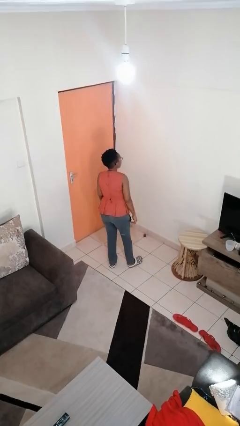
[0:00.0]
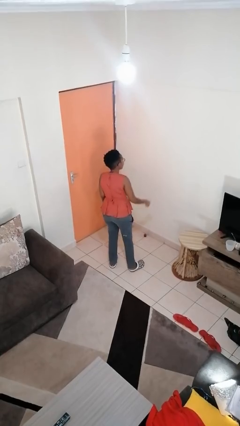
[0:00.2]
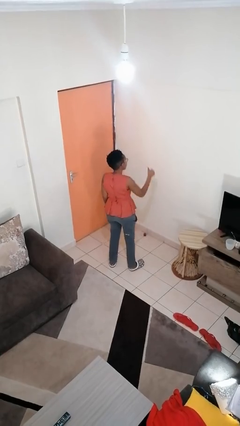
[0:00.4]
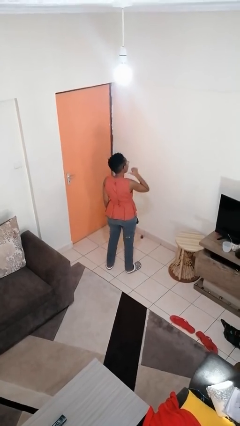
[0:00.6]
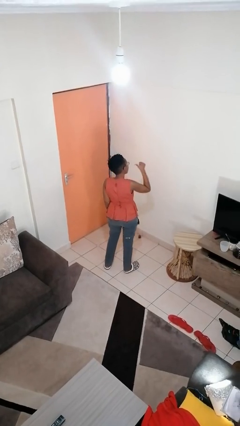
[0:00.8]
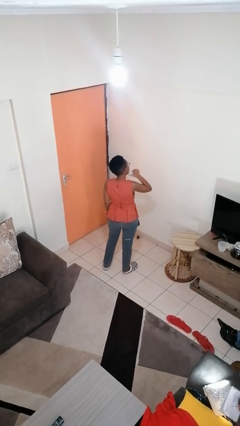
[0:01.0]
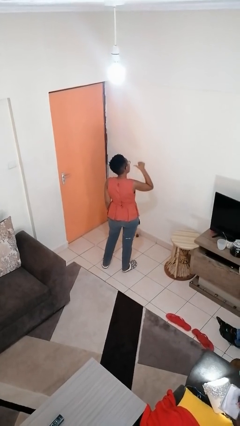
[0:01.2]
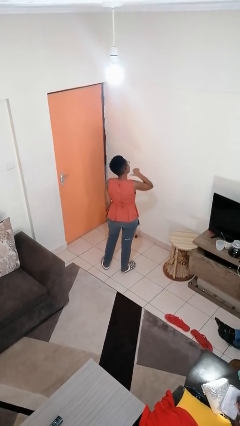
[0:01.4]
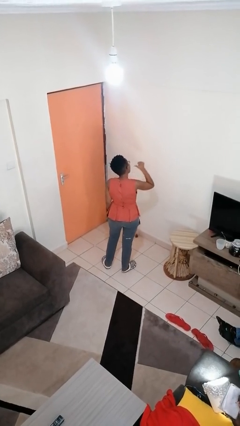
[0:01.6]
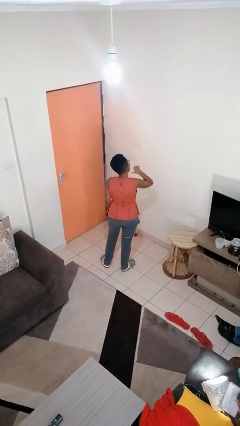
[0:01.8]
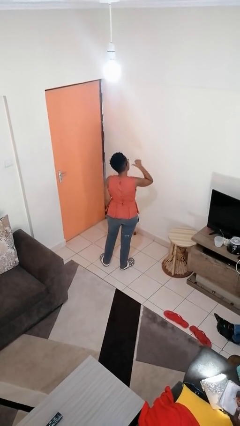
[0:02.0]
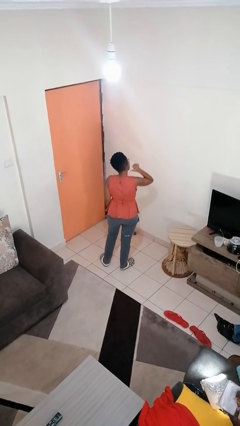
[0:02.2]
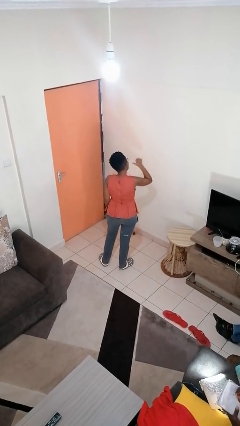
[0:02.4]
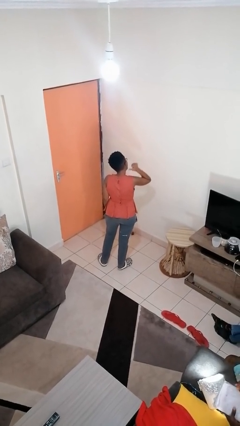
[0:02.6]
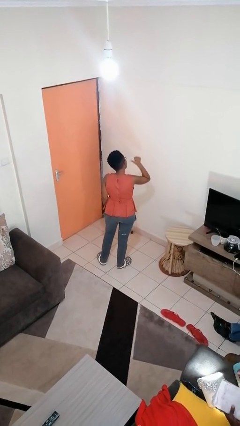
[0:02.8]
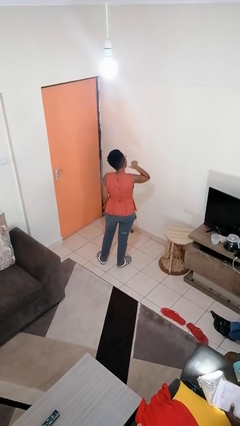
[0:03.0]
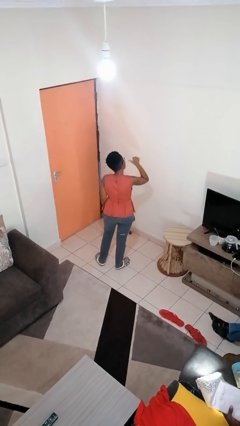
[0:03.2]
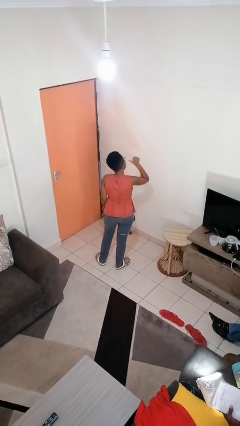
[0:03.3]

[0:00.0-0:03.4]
person gestures behind me

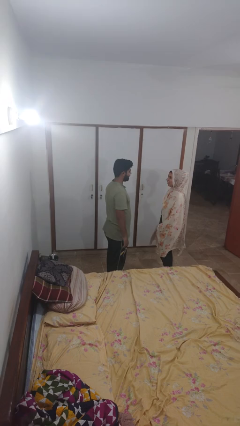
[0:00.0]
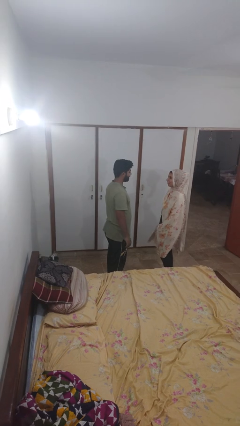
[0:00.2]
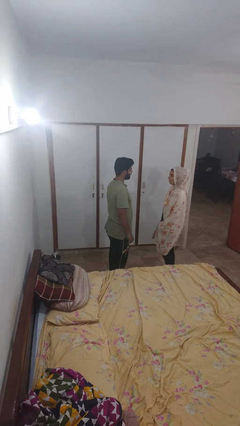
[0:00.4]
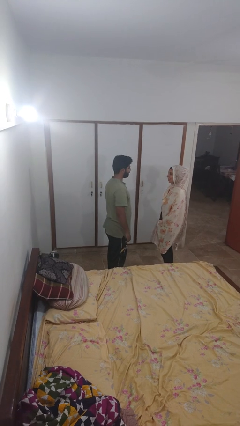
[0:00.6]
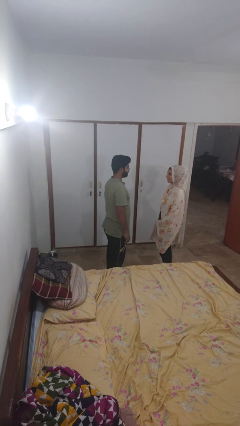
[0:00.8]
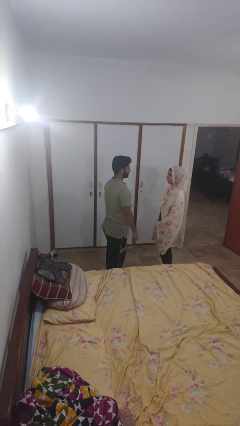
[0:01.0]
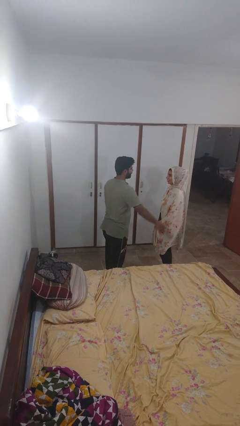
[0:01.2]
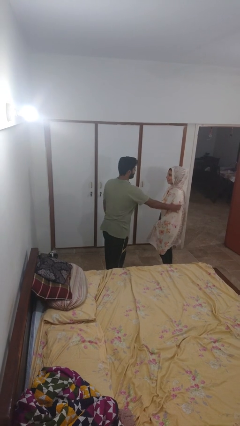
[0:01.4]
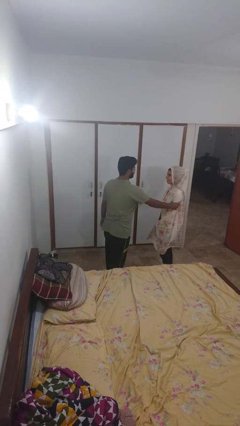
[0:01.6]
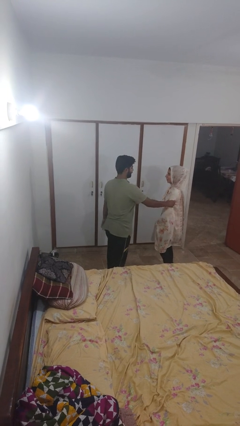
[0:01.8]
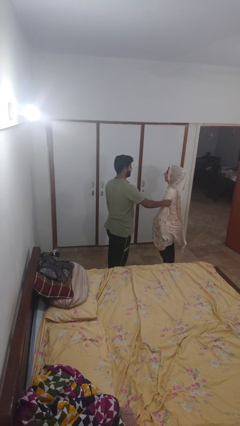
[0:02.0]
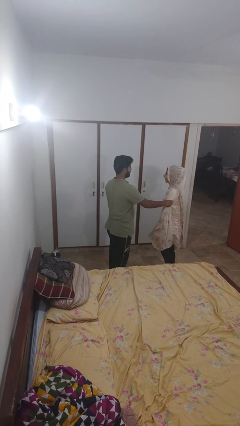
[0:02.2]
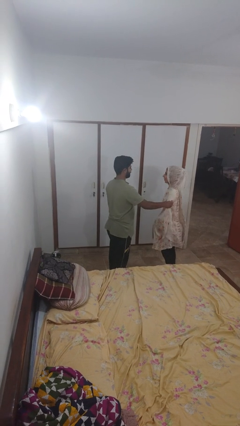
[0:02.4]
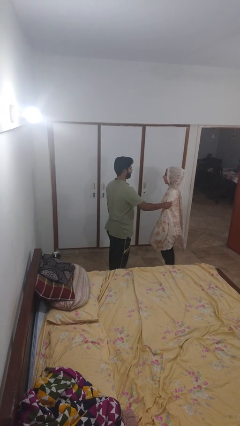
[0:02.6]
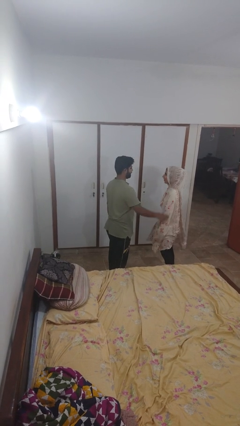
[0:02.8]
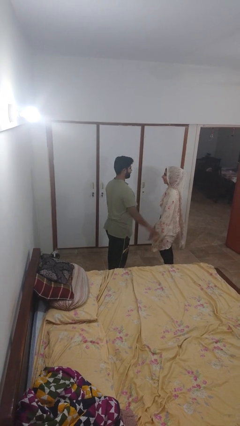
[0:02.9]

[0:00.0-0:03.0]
person grabs person by bicep

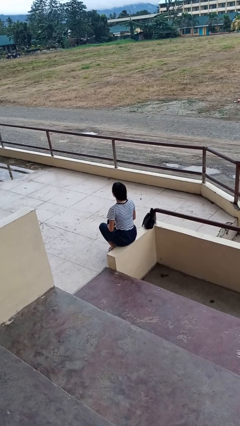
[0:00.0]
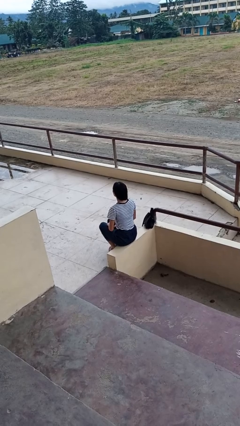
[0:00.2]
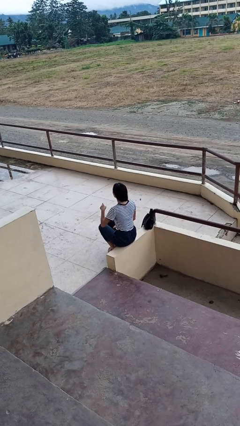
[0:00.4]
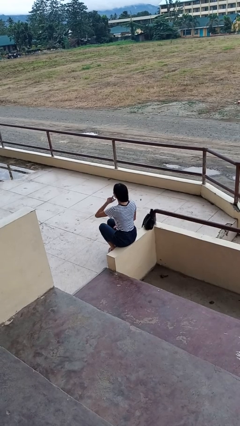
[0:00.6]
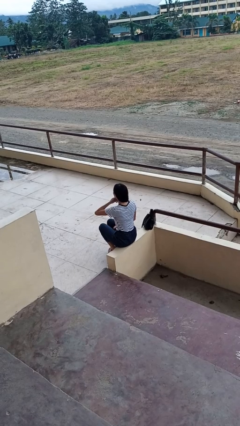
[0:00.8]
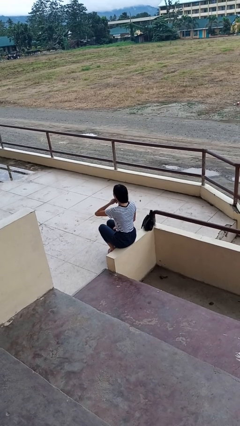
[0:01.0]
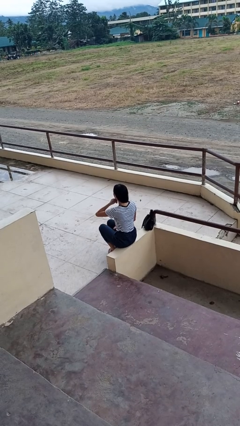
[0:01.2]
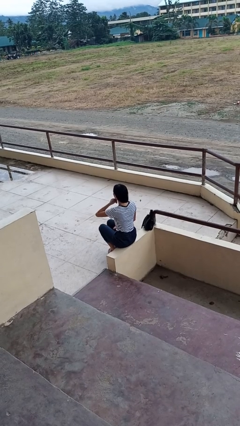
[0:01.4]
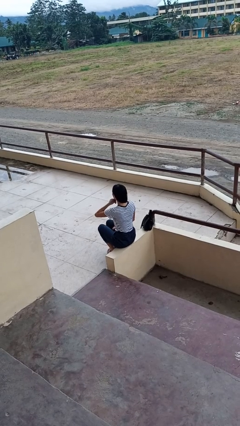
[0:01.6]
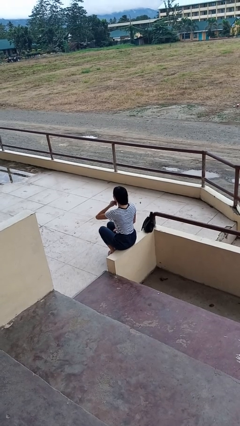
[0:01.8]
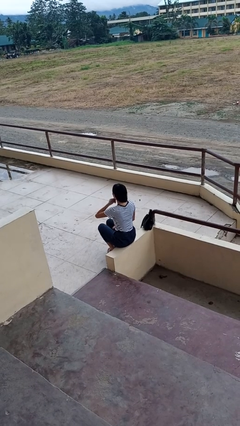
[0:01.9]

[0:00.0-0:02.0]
person strokes chin

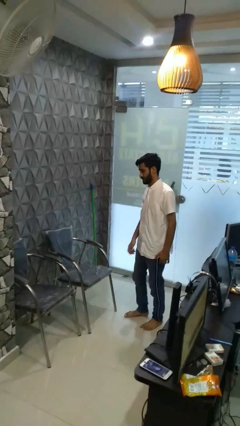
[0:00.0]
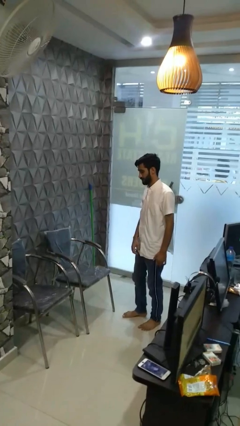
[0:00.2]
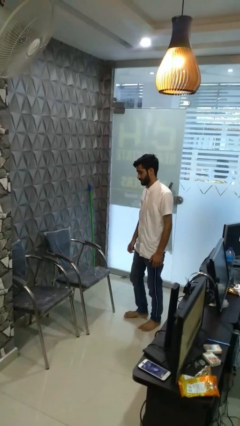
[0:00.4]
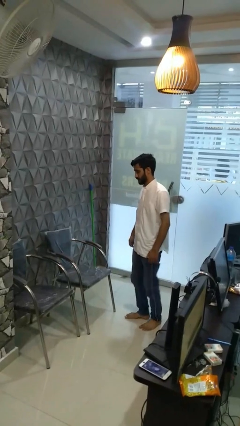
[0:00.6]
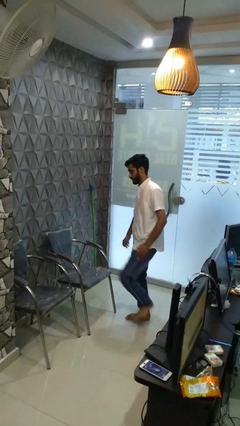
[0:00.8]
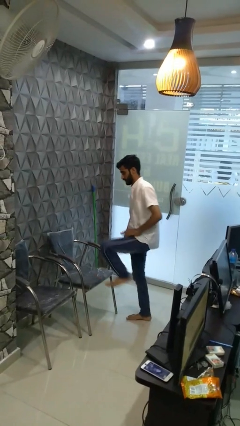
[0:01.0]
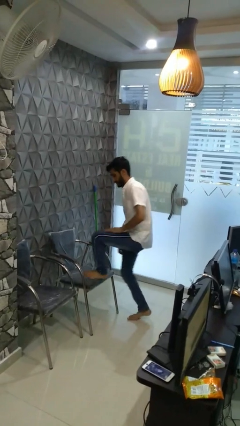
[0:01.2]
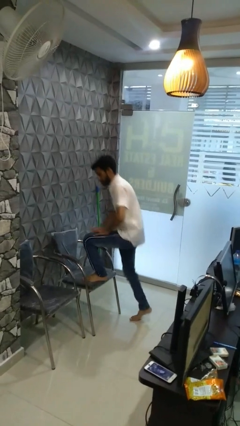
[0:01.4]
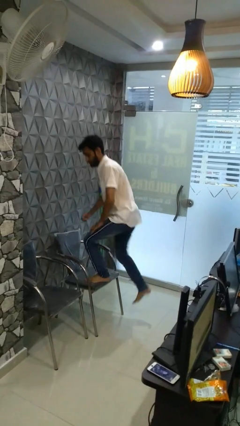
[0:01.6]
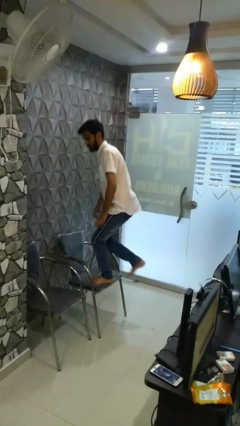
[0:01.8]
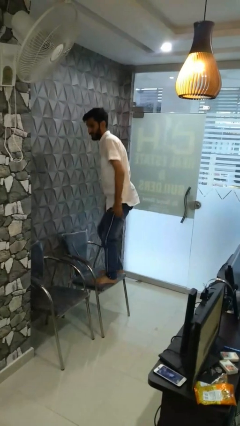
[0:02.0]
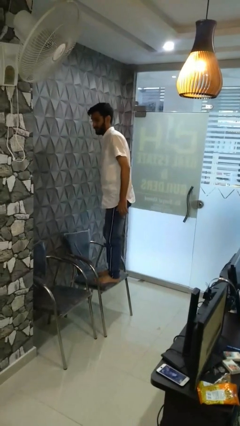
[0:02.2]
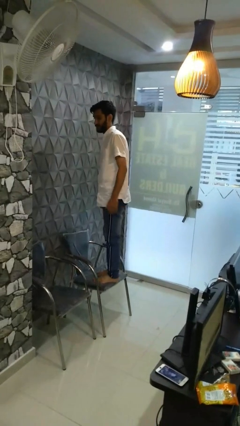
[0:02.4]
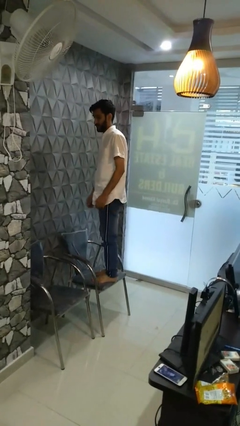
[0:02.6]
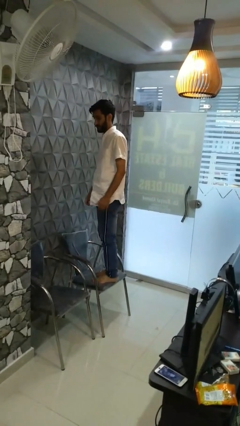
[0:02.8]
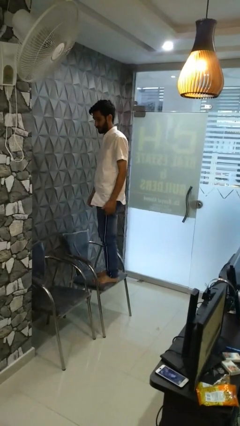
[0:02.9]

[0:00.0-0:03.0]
person climbs on chair

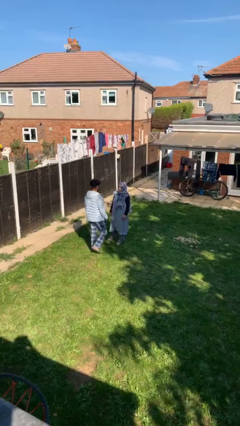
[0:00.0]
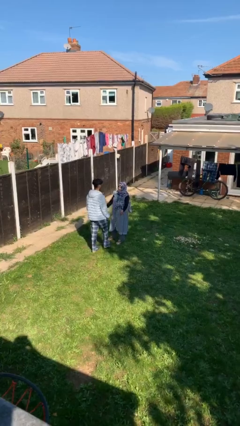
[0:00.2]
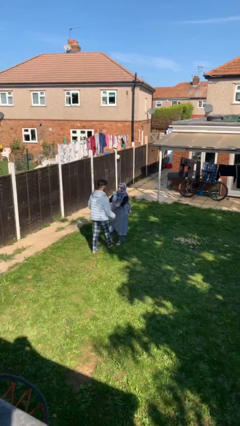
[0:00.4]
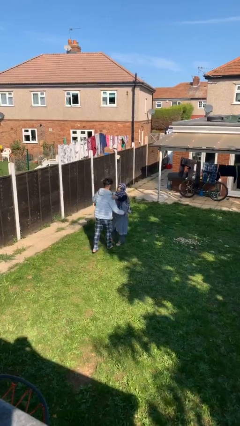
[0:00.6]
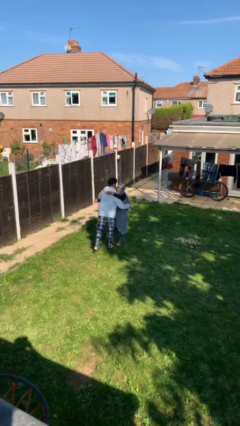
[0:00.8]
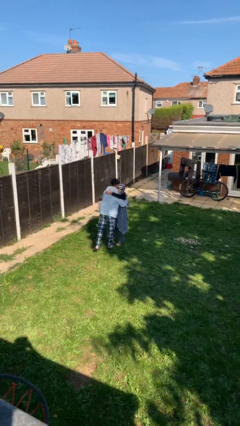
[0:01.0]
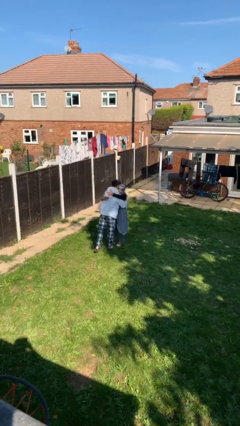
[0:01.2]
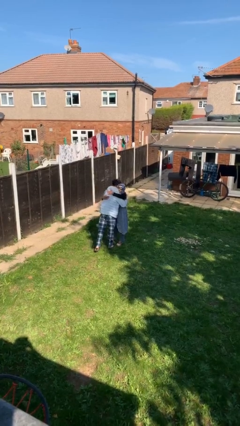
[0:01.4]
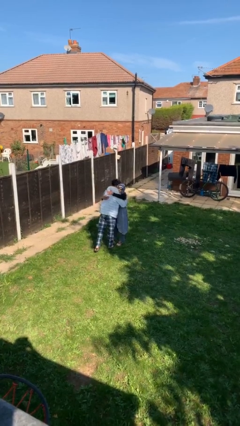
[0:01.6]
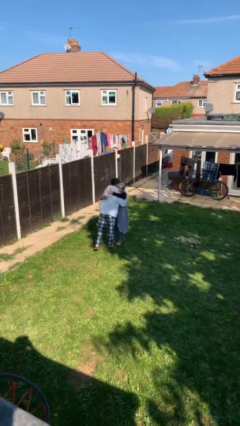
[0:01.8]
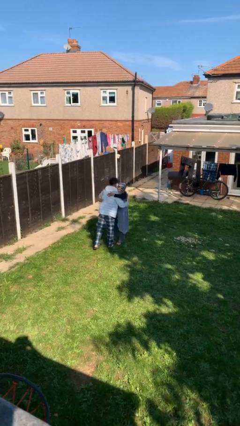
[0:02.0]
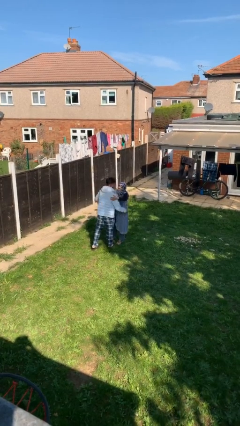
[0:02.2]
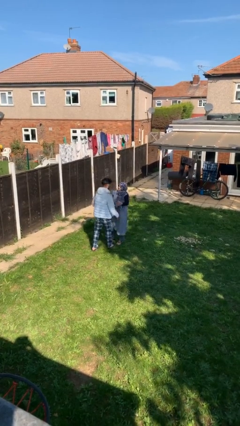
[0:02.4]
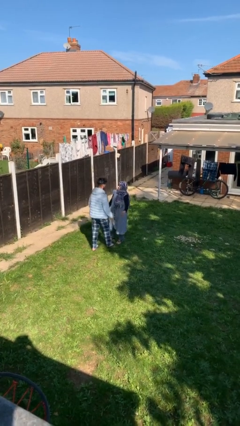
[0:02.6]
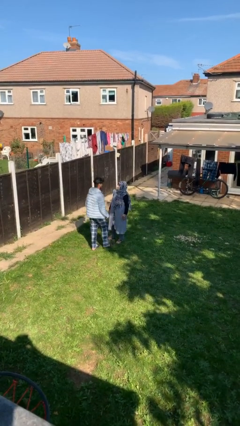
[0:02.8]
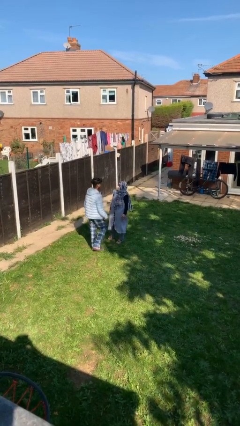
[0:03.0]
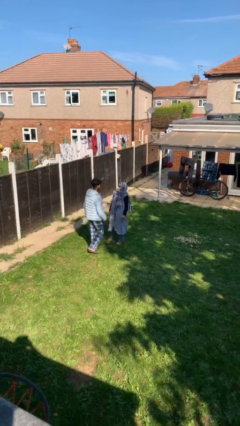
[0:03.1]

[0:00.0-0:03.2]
person embraces person

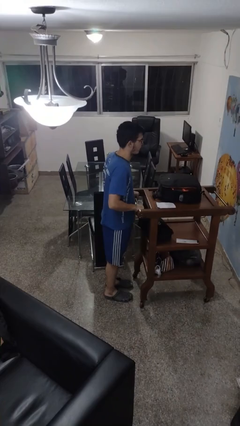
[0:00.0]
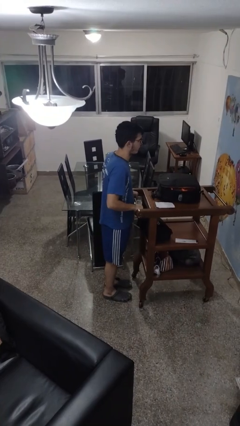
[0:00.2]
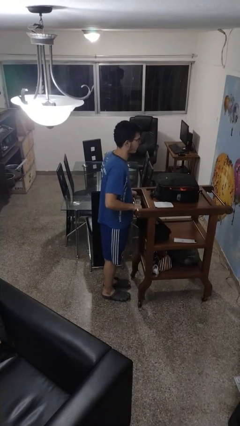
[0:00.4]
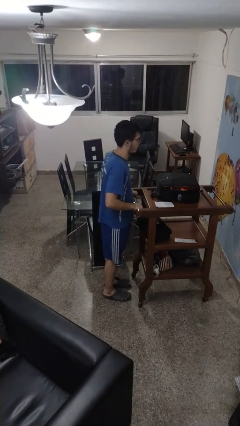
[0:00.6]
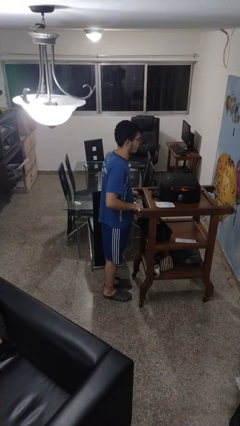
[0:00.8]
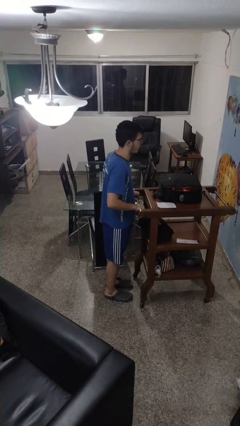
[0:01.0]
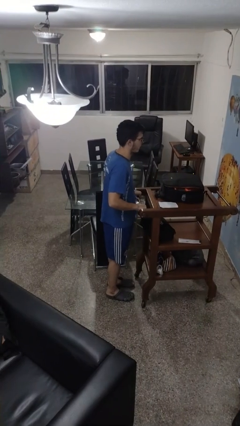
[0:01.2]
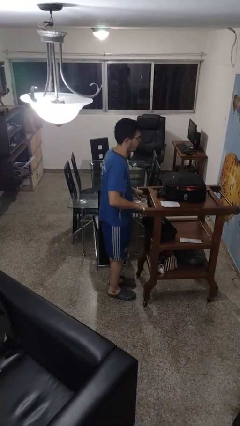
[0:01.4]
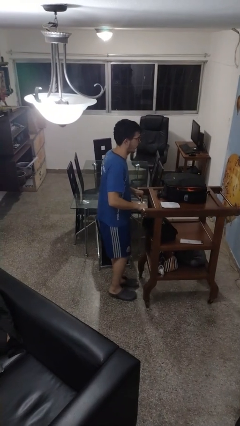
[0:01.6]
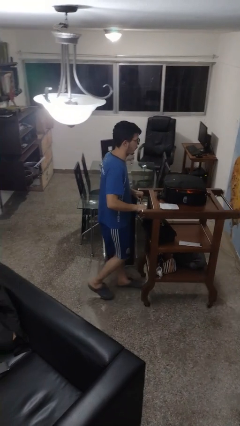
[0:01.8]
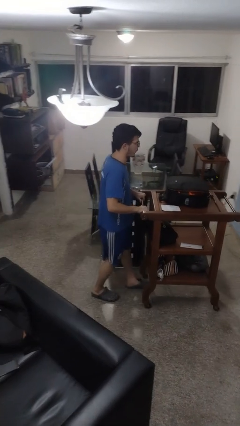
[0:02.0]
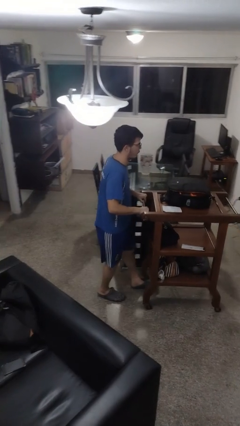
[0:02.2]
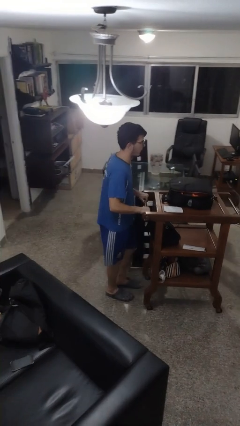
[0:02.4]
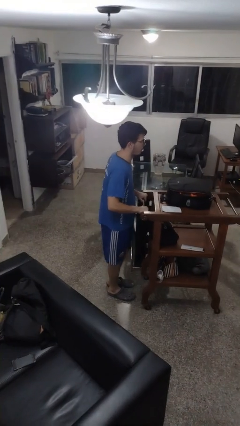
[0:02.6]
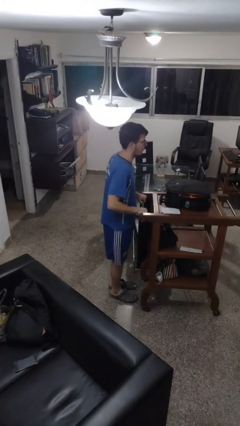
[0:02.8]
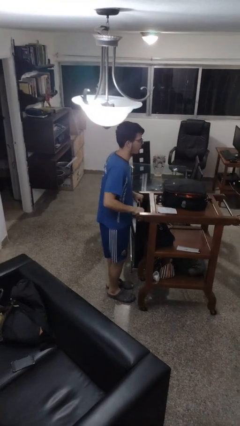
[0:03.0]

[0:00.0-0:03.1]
person pulls wheeled cart
